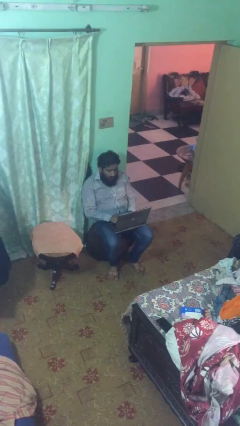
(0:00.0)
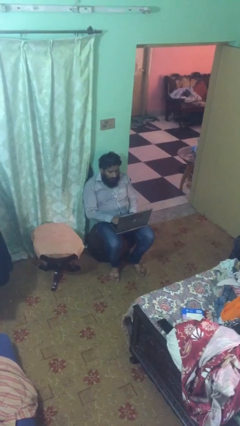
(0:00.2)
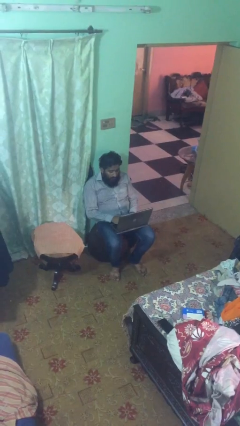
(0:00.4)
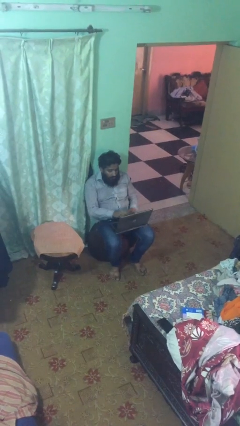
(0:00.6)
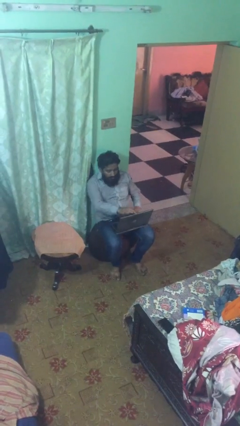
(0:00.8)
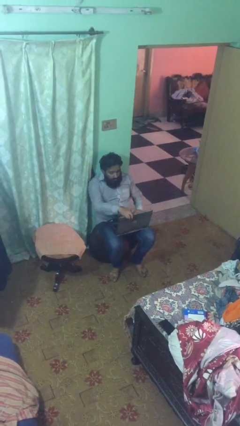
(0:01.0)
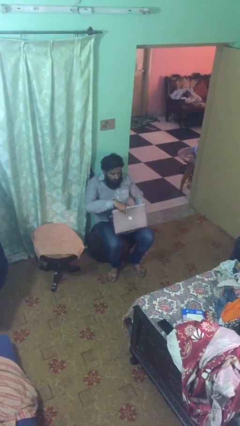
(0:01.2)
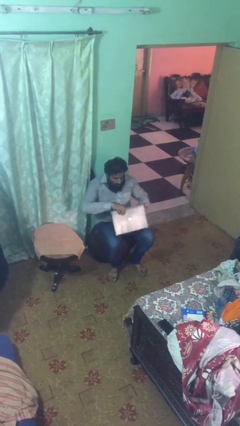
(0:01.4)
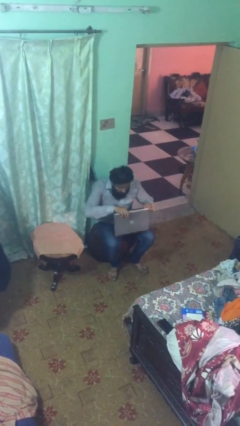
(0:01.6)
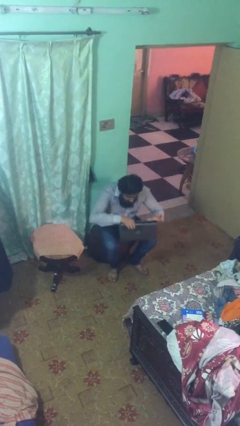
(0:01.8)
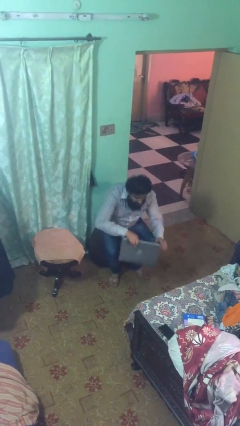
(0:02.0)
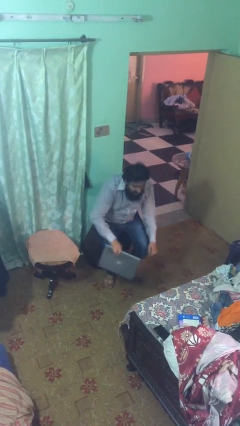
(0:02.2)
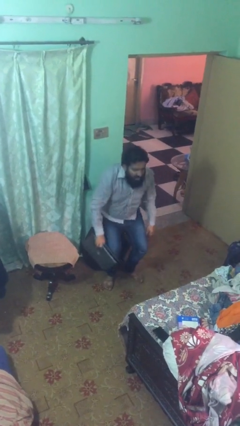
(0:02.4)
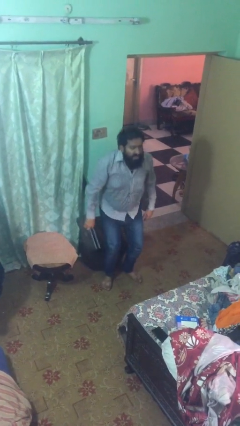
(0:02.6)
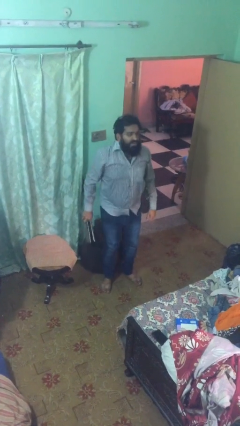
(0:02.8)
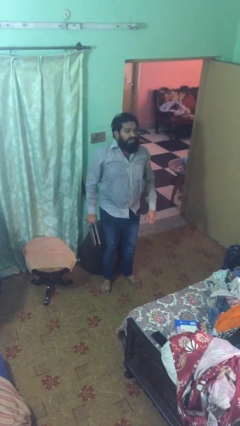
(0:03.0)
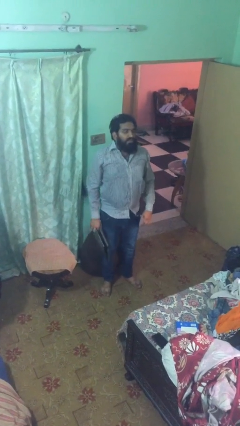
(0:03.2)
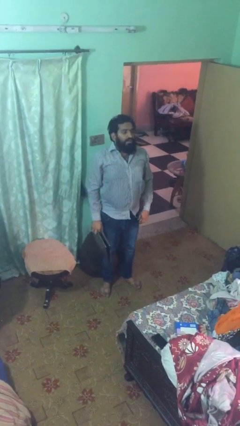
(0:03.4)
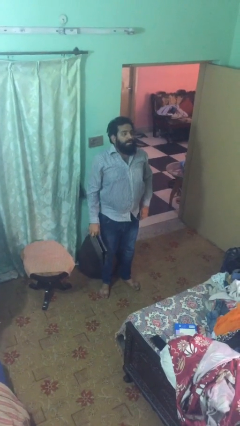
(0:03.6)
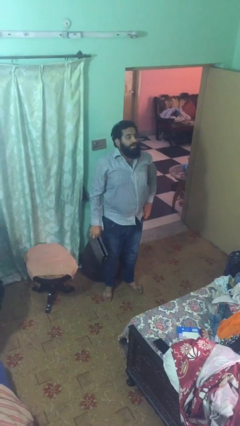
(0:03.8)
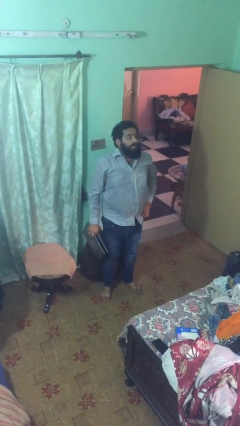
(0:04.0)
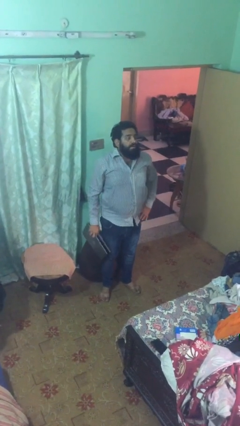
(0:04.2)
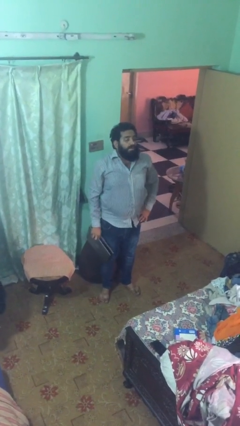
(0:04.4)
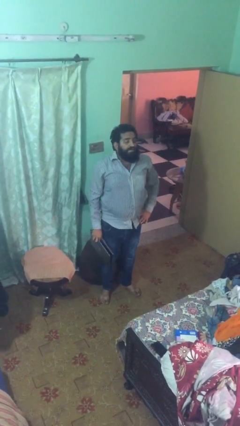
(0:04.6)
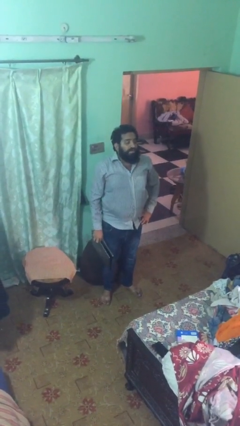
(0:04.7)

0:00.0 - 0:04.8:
person stands up

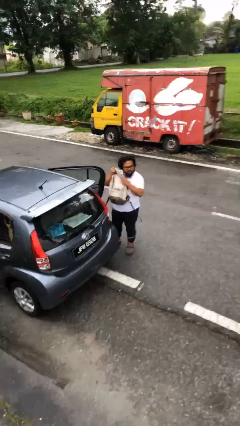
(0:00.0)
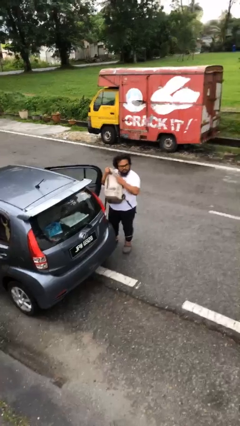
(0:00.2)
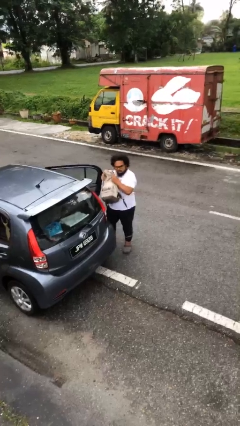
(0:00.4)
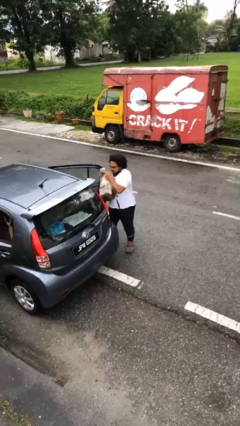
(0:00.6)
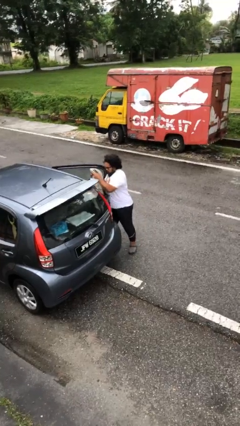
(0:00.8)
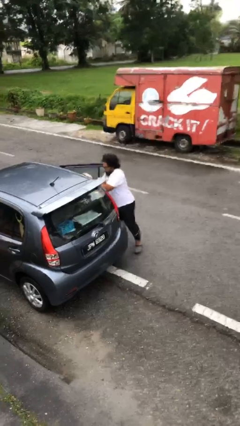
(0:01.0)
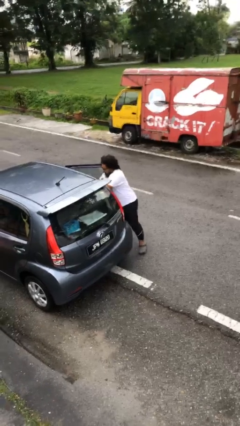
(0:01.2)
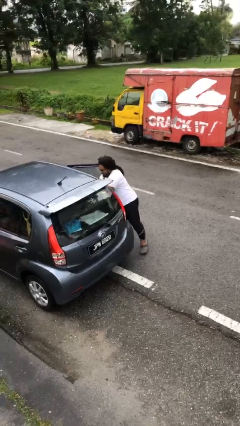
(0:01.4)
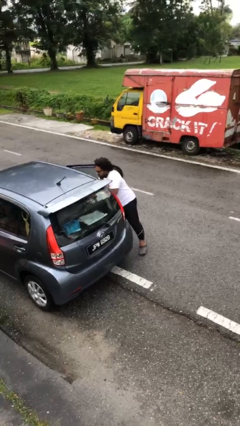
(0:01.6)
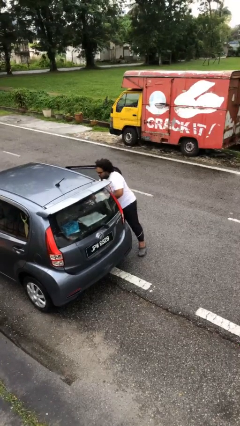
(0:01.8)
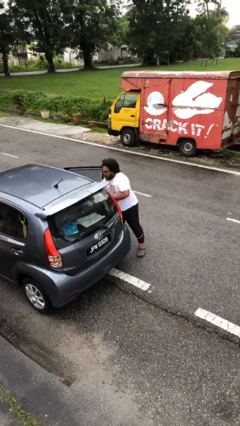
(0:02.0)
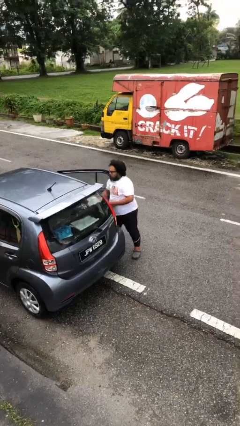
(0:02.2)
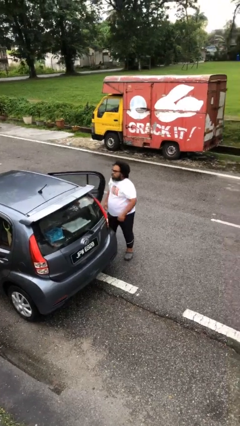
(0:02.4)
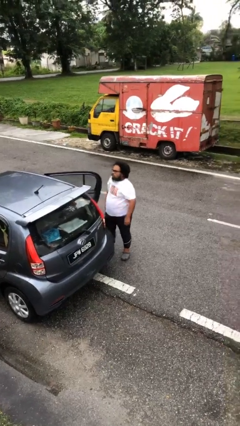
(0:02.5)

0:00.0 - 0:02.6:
person loads car

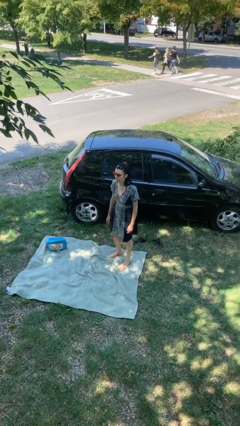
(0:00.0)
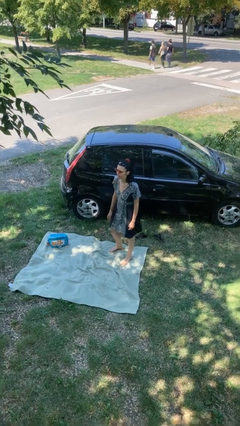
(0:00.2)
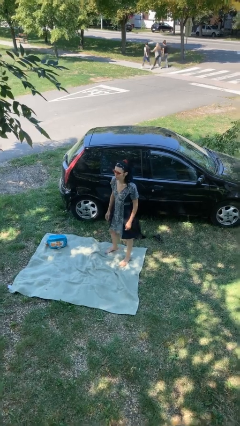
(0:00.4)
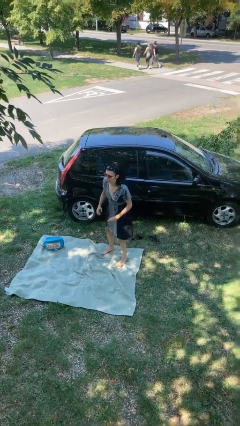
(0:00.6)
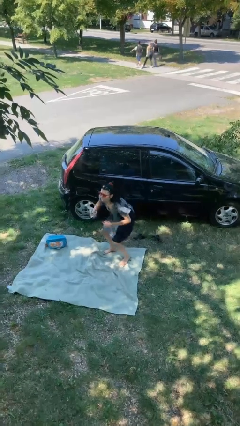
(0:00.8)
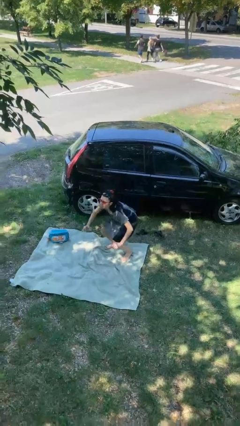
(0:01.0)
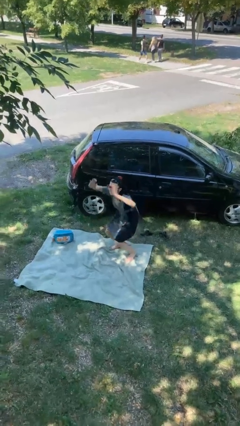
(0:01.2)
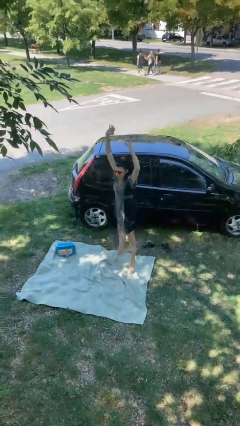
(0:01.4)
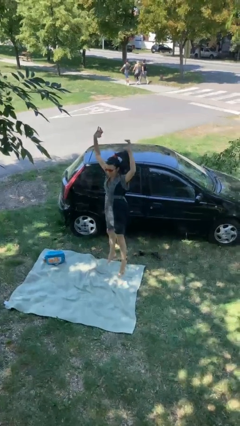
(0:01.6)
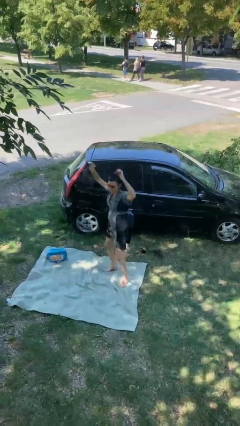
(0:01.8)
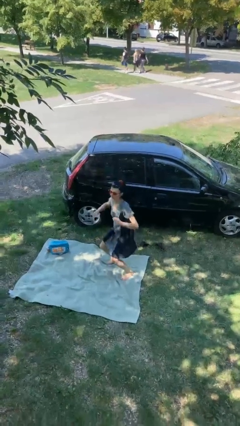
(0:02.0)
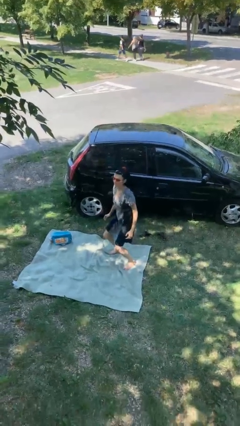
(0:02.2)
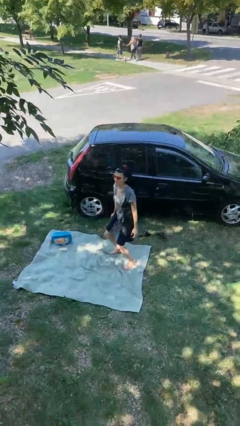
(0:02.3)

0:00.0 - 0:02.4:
person jumps

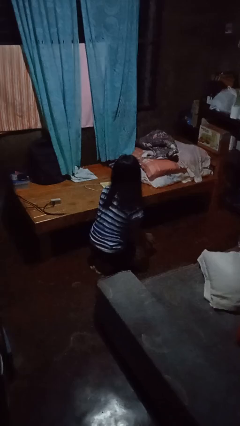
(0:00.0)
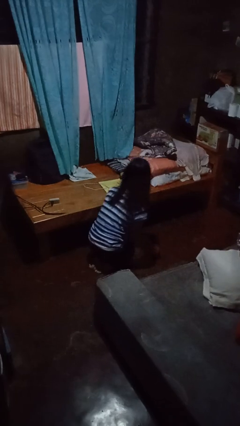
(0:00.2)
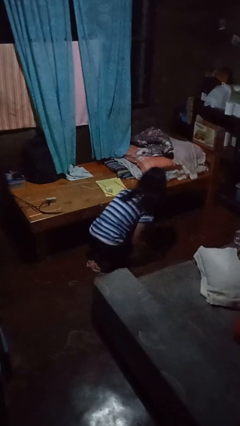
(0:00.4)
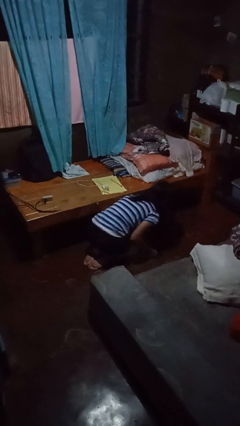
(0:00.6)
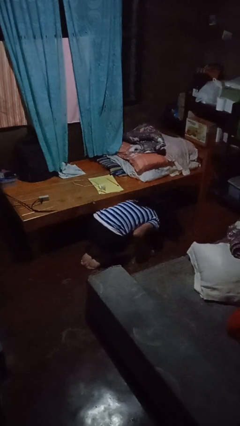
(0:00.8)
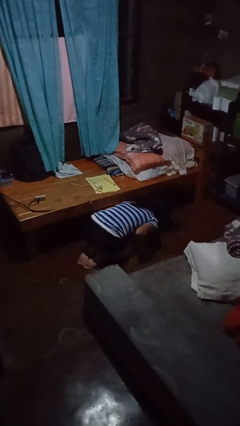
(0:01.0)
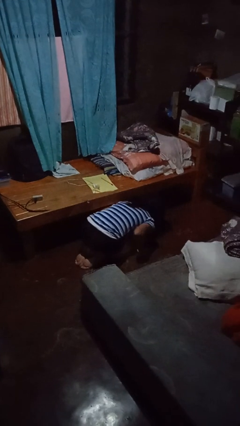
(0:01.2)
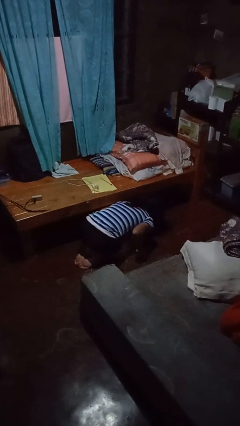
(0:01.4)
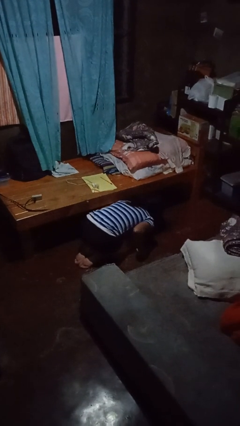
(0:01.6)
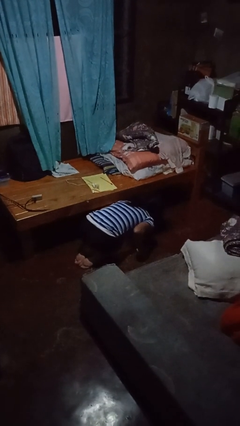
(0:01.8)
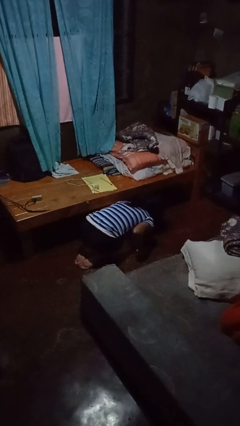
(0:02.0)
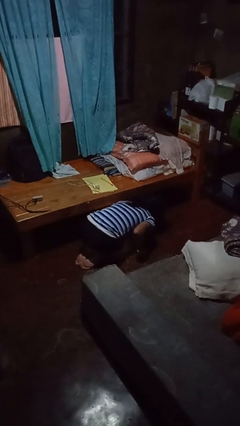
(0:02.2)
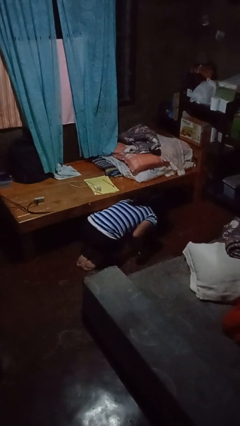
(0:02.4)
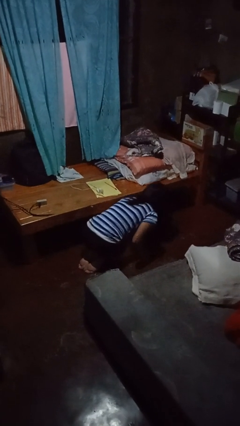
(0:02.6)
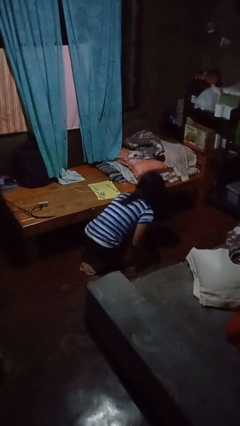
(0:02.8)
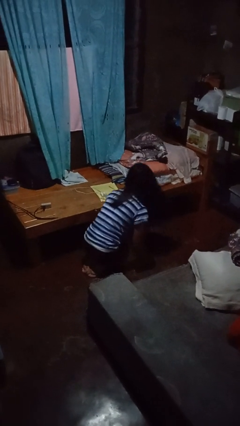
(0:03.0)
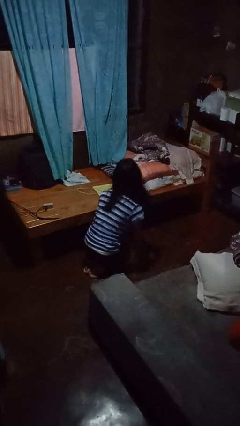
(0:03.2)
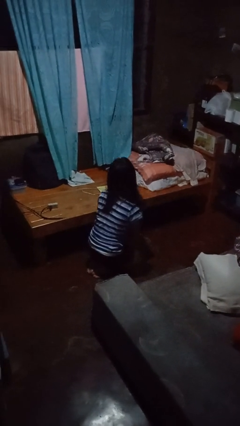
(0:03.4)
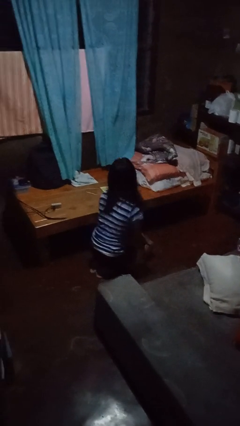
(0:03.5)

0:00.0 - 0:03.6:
person searches under bed

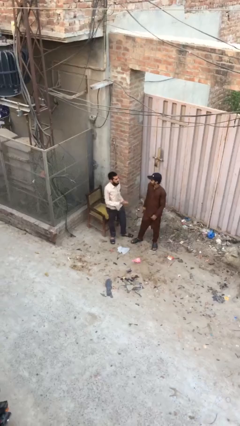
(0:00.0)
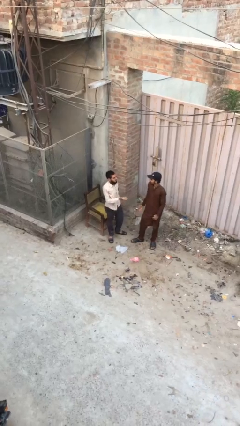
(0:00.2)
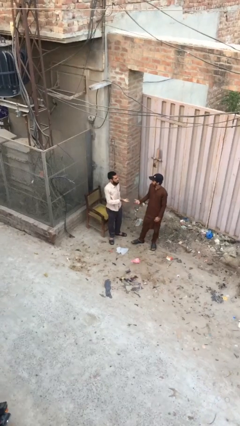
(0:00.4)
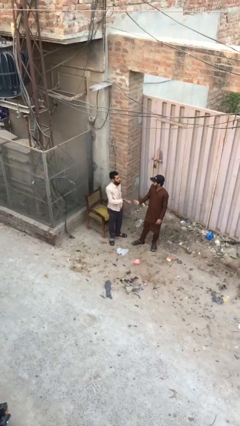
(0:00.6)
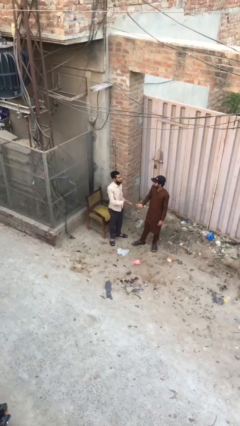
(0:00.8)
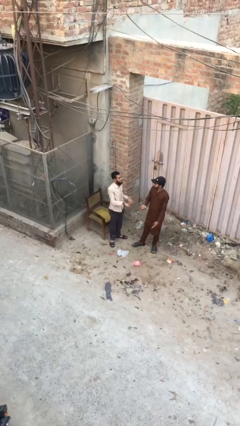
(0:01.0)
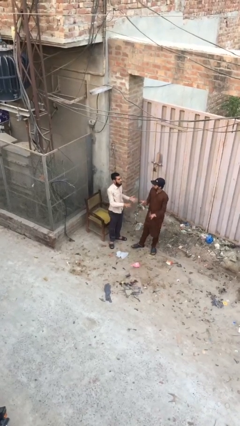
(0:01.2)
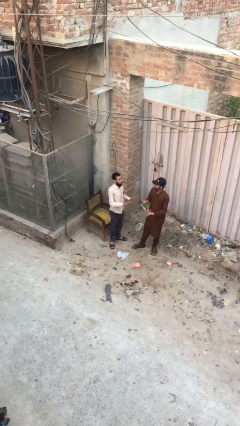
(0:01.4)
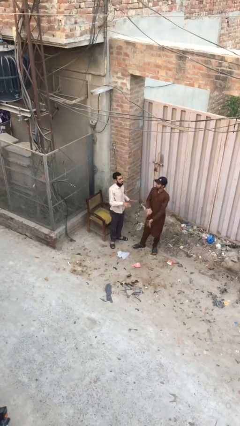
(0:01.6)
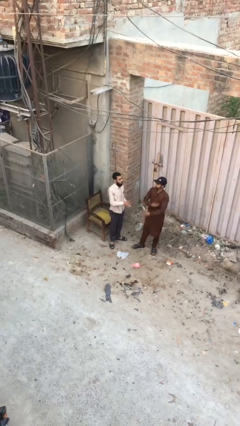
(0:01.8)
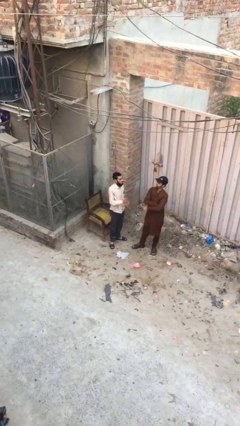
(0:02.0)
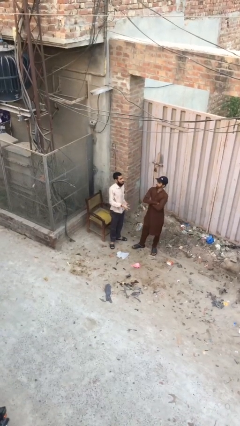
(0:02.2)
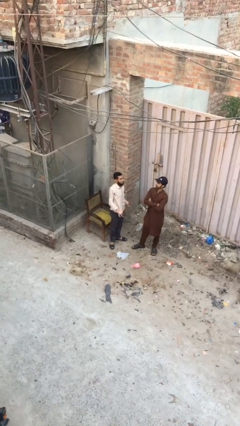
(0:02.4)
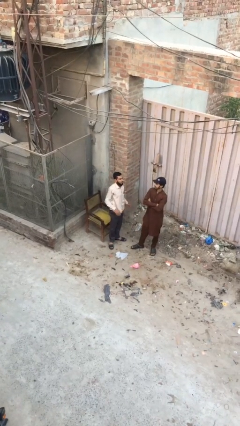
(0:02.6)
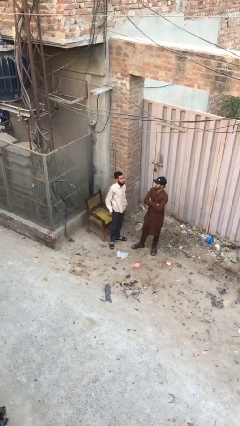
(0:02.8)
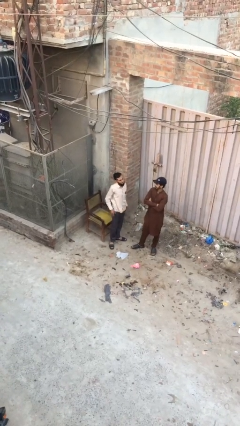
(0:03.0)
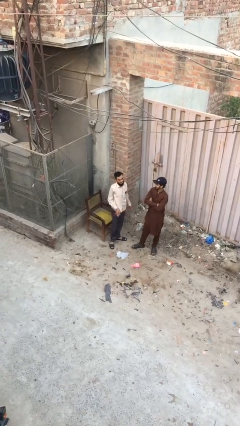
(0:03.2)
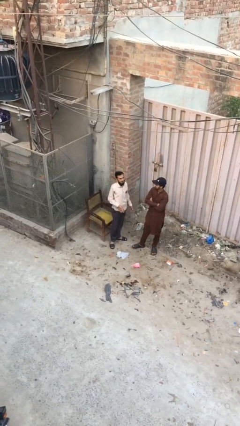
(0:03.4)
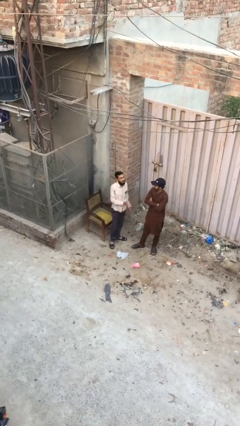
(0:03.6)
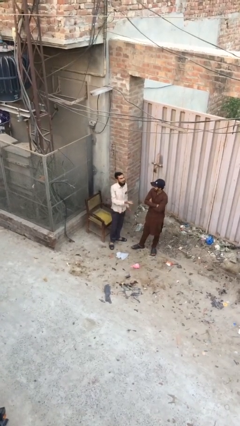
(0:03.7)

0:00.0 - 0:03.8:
person talks to person

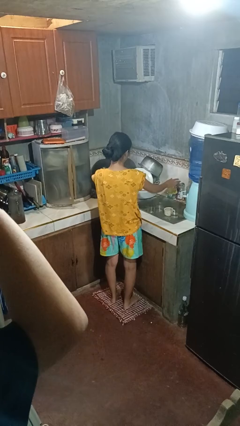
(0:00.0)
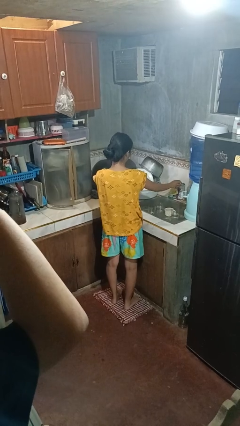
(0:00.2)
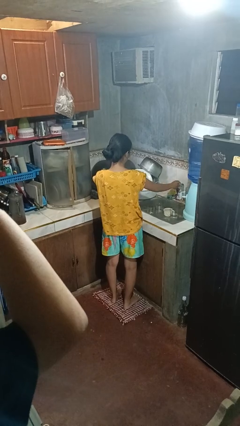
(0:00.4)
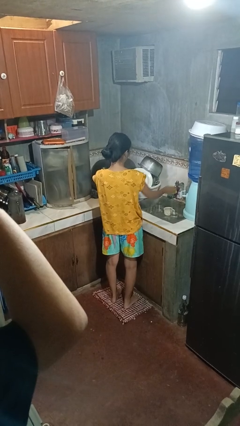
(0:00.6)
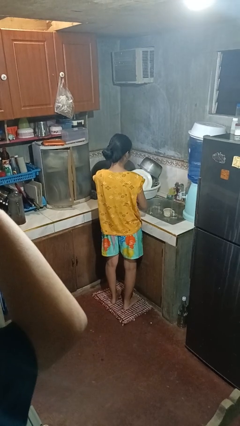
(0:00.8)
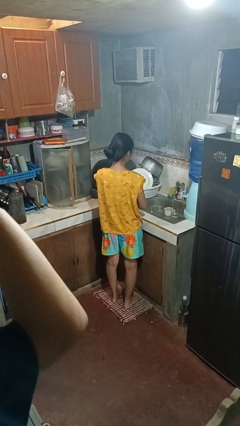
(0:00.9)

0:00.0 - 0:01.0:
person turns on faucet
